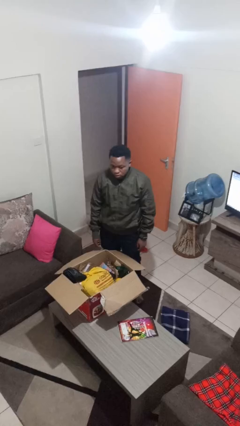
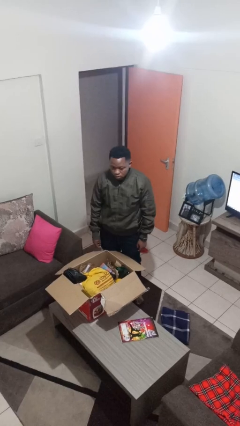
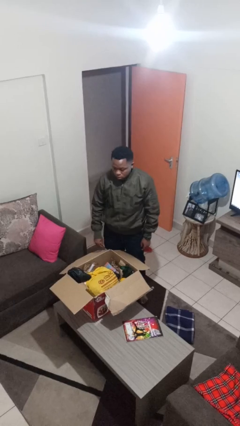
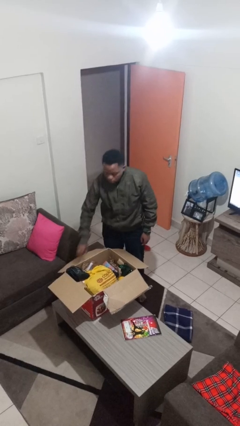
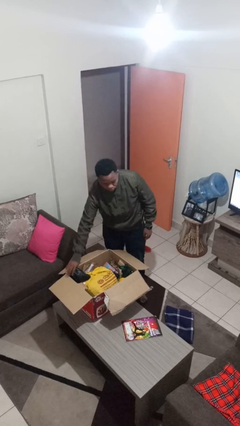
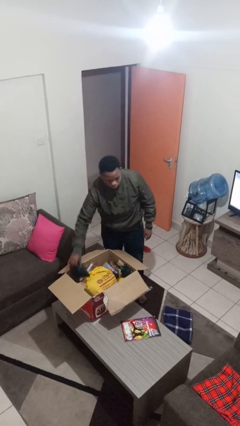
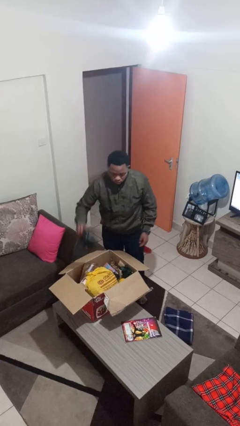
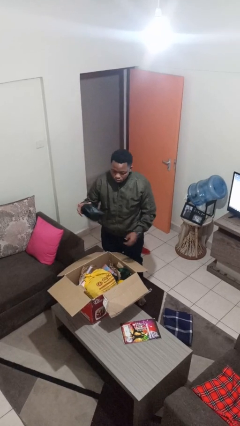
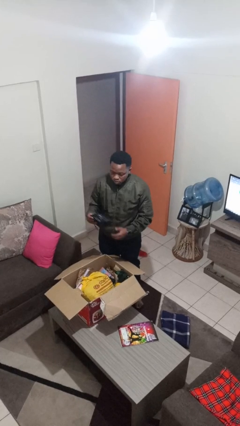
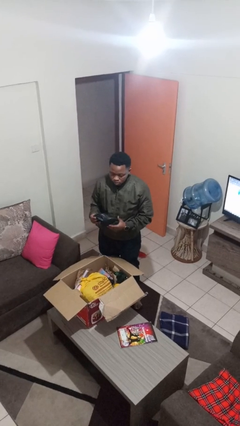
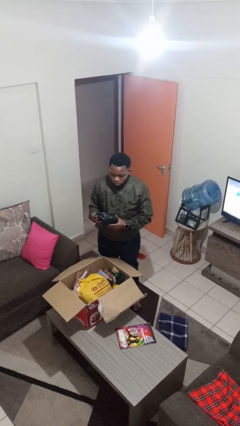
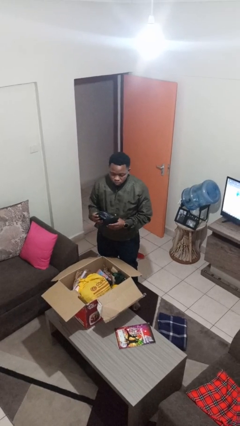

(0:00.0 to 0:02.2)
person takes object from box

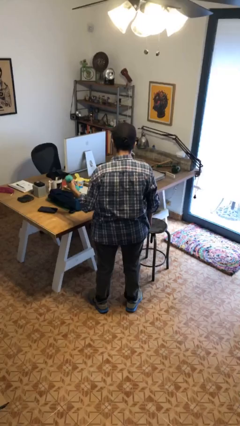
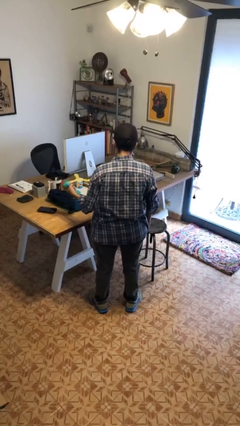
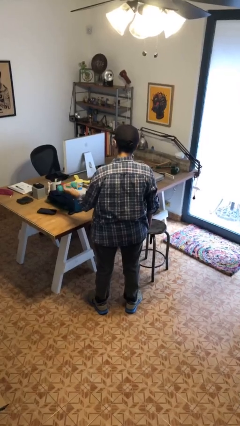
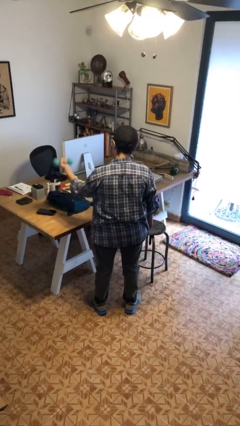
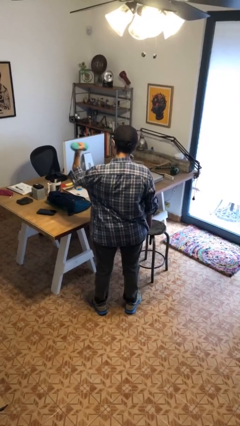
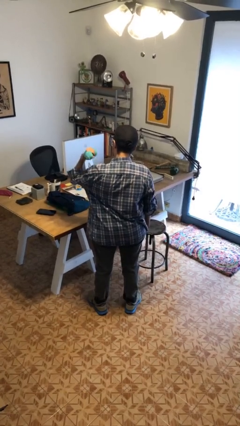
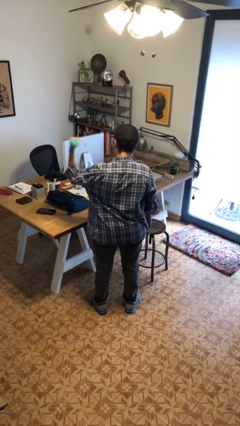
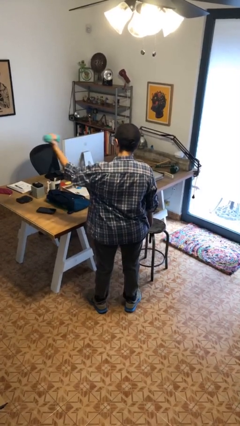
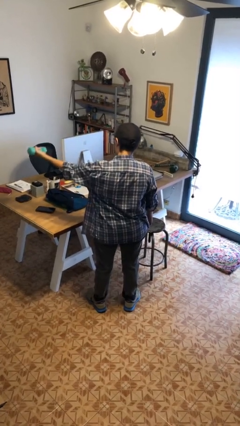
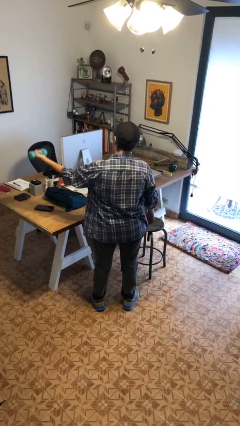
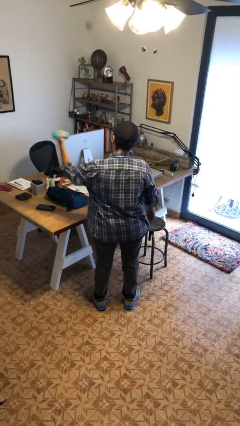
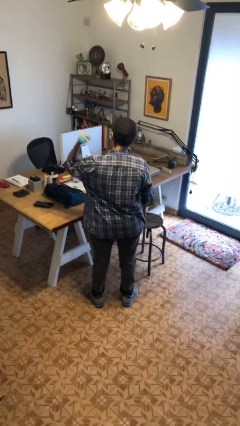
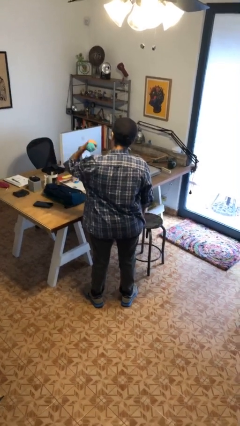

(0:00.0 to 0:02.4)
person lifts dumbbells

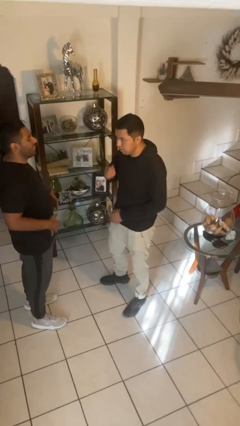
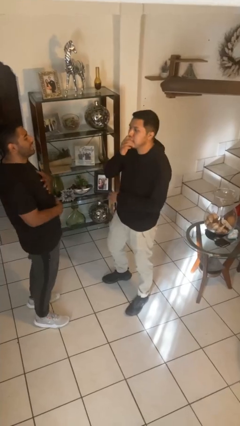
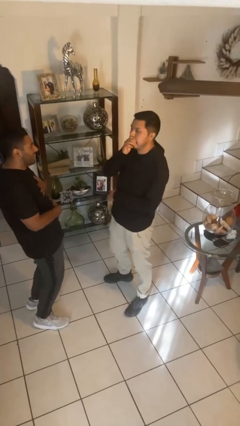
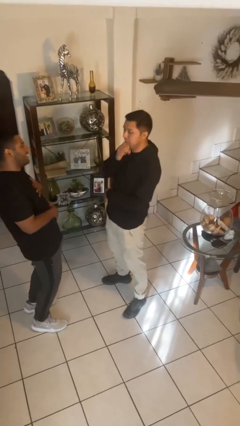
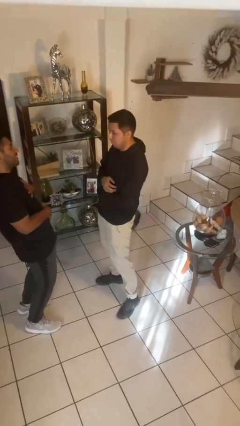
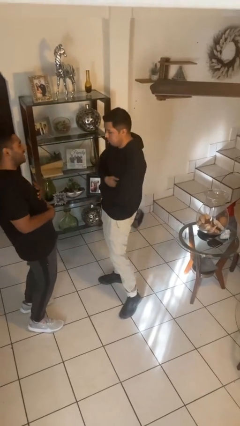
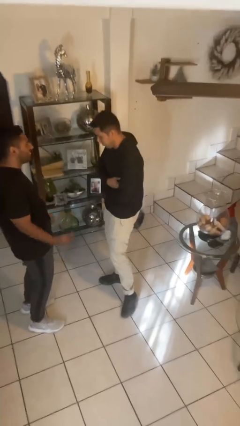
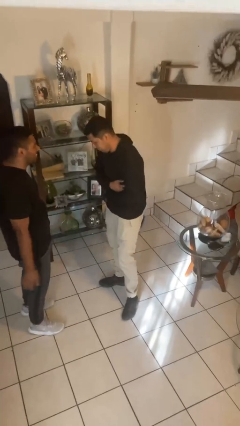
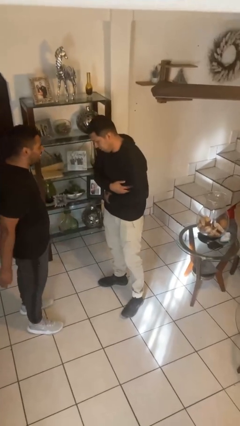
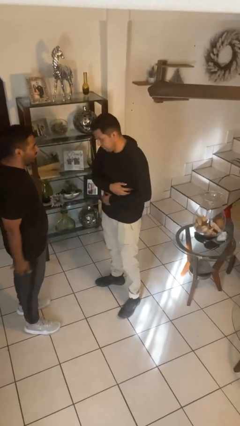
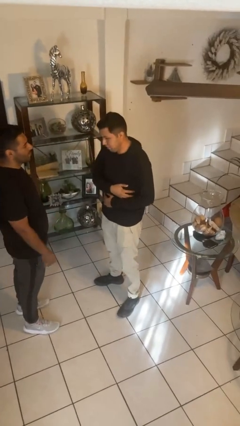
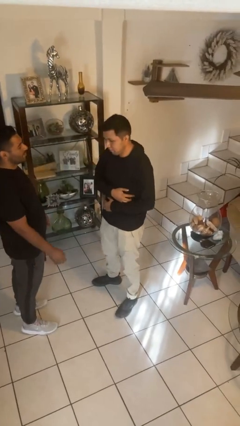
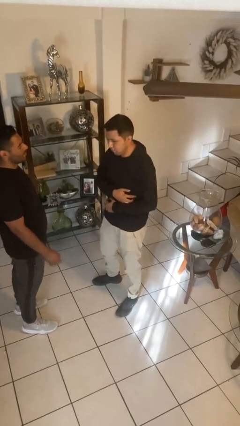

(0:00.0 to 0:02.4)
person laughs with person

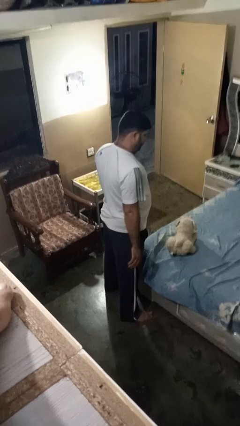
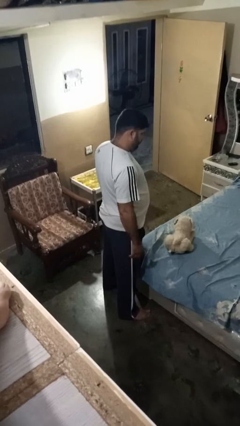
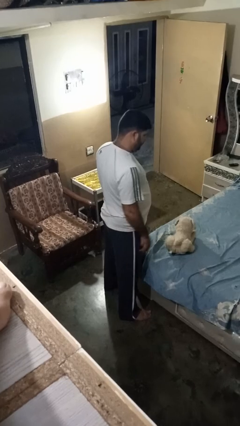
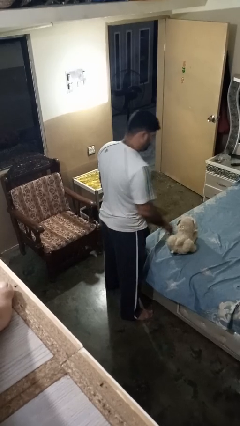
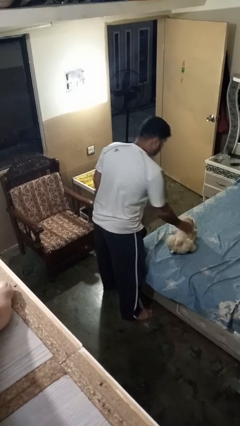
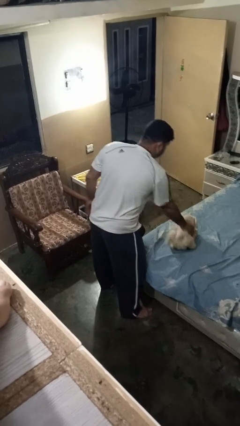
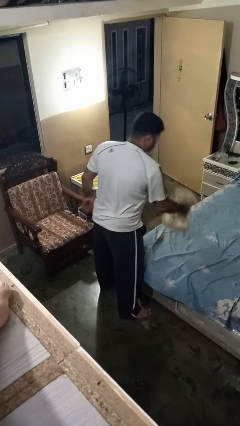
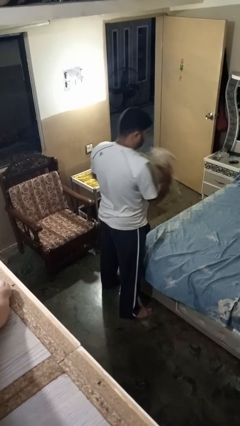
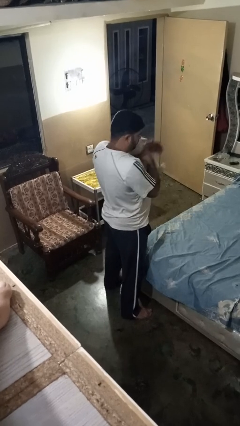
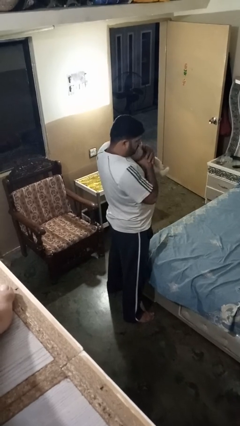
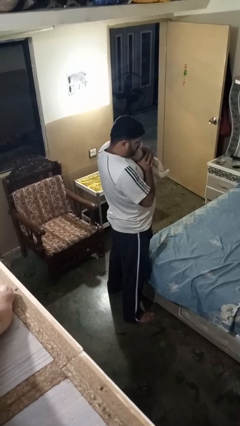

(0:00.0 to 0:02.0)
person hugs stuffed animal

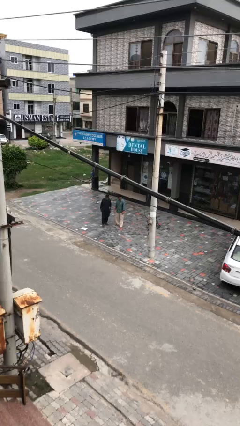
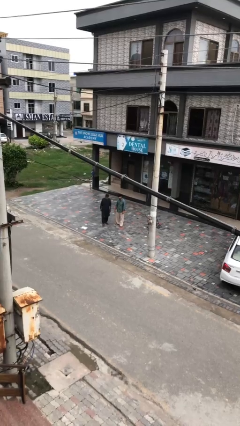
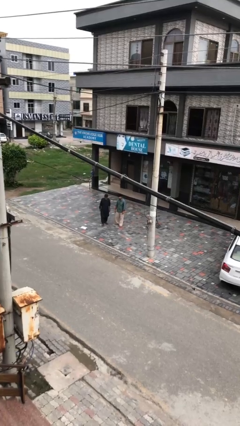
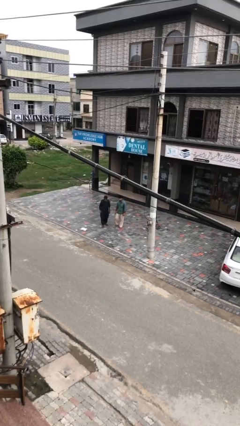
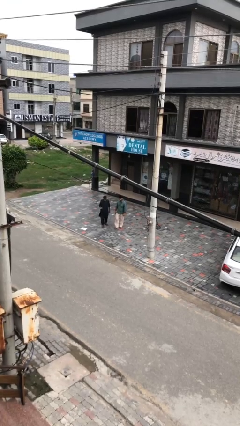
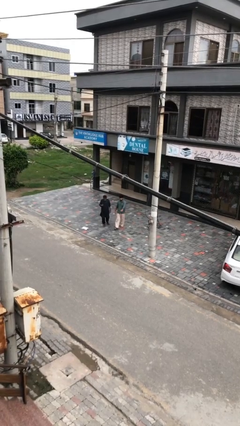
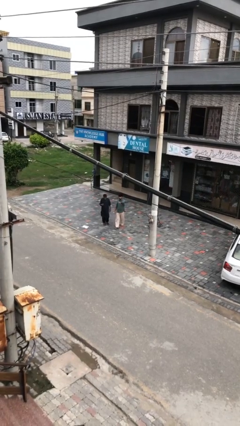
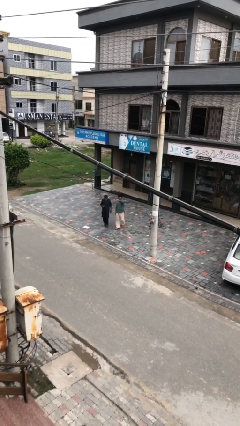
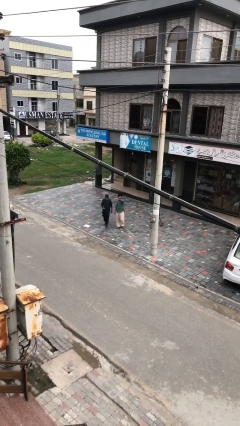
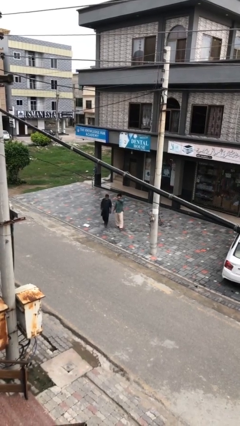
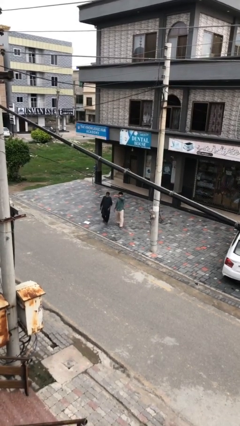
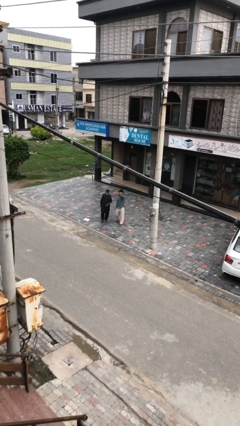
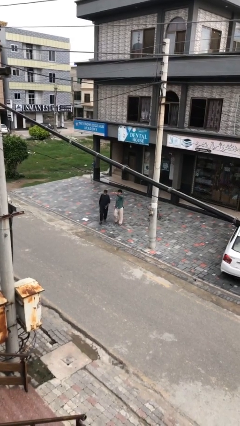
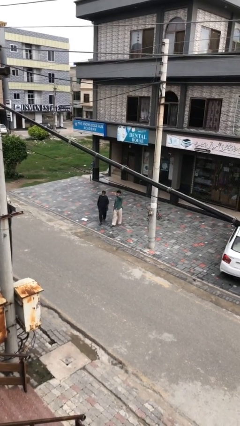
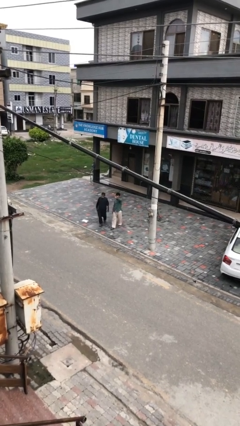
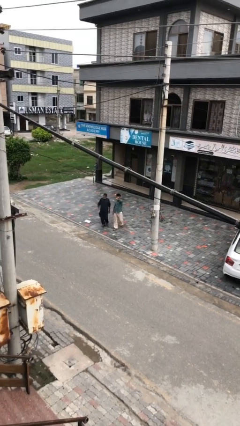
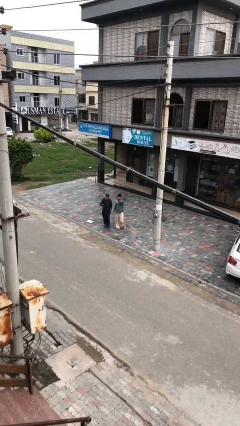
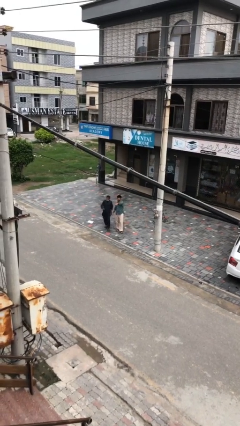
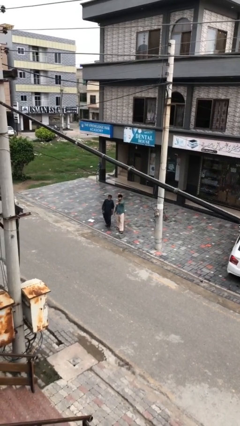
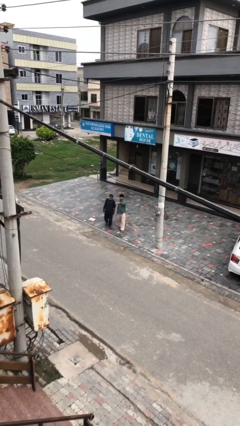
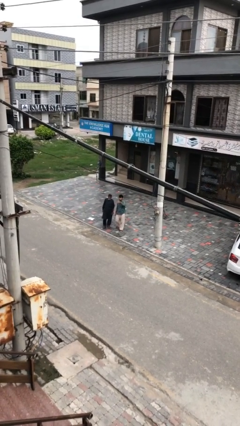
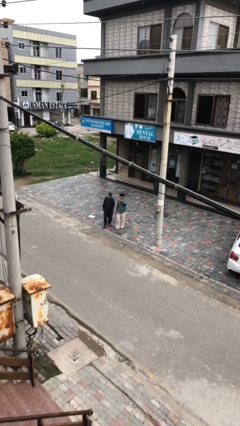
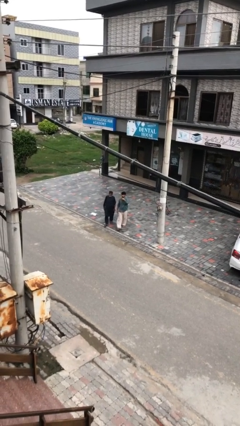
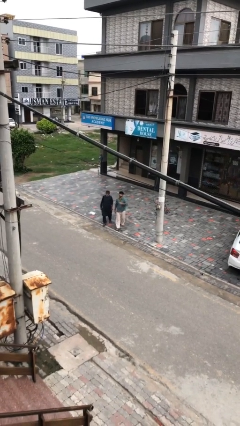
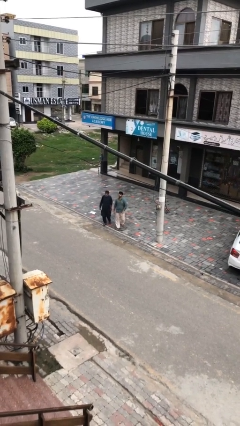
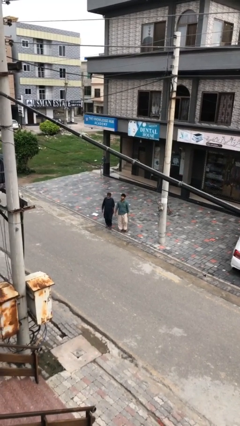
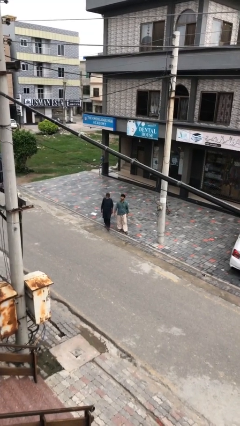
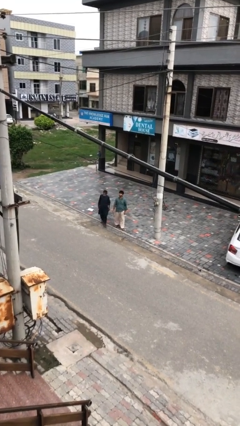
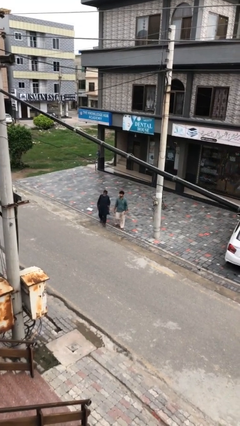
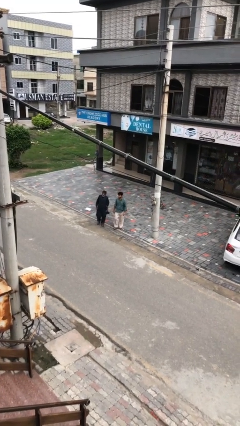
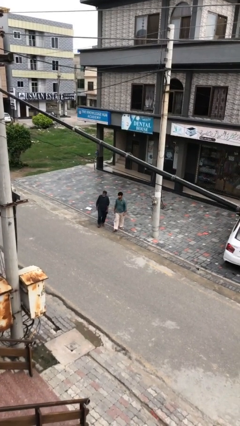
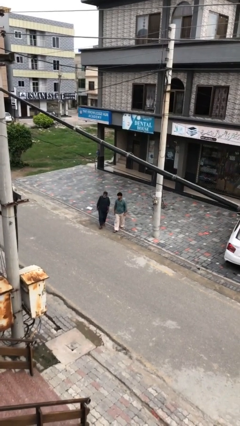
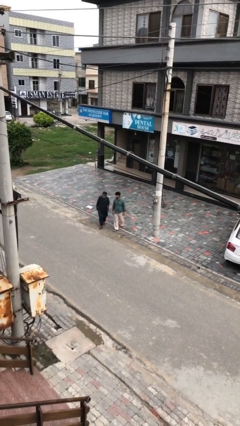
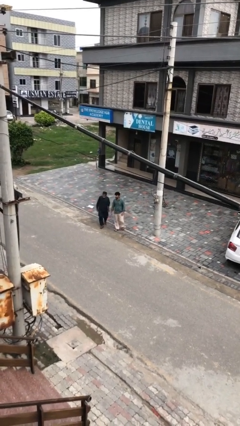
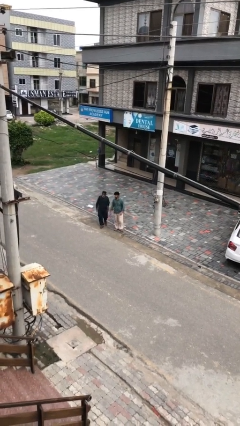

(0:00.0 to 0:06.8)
person talks to person

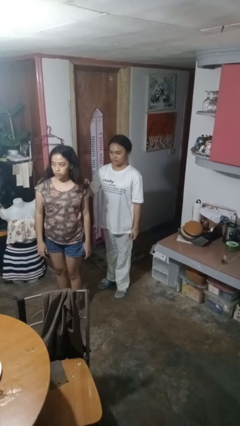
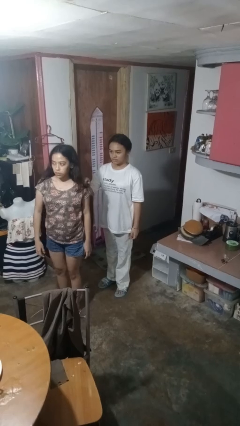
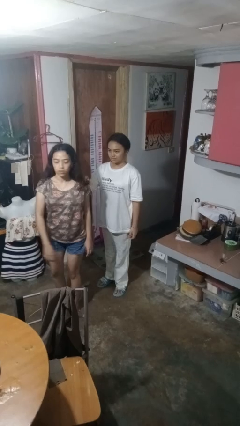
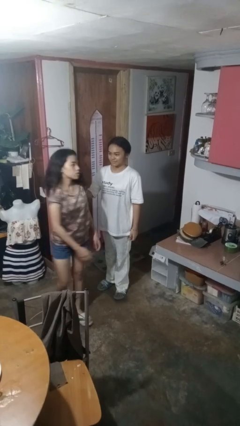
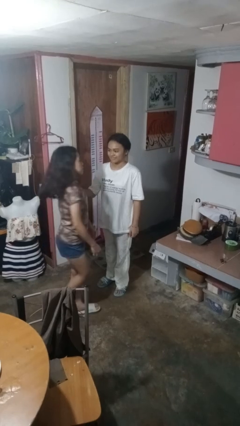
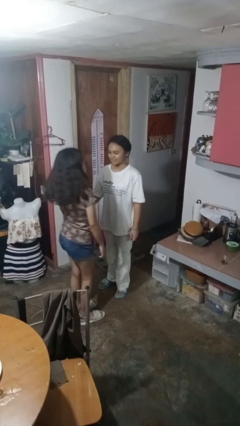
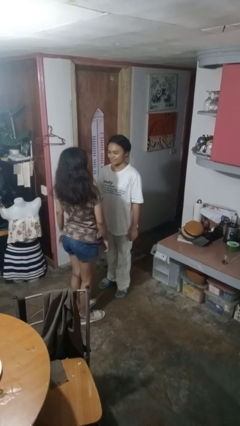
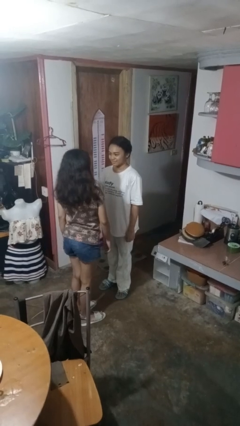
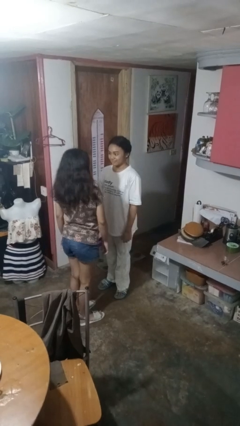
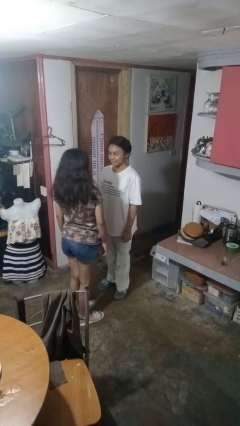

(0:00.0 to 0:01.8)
person spins person around
